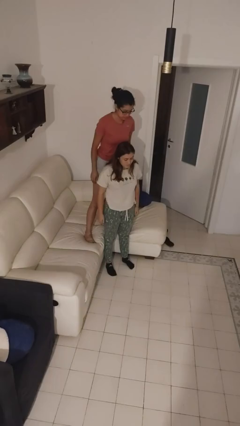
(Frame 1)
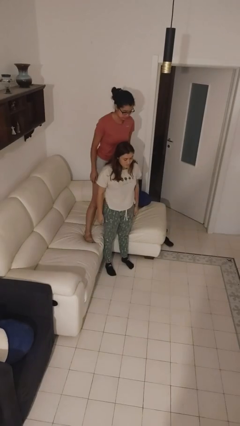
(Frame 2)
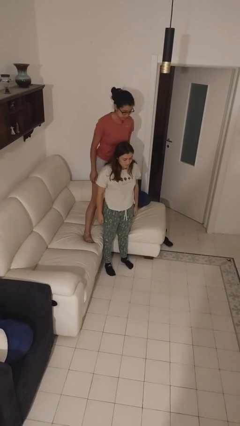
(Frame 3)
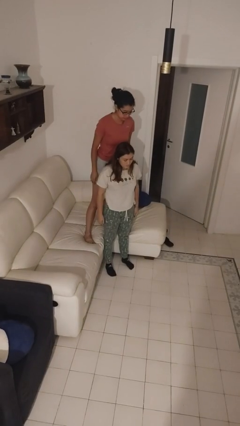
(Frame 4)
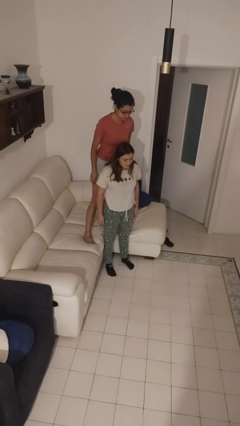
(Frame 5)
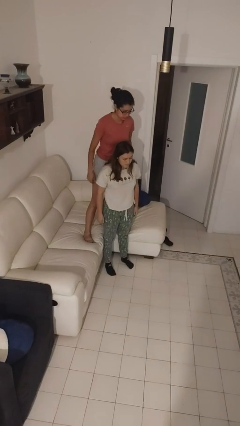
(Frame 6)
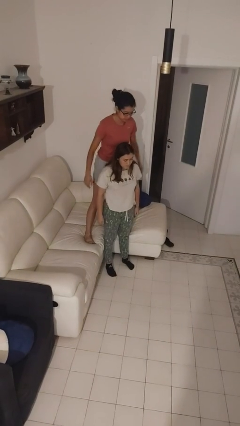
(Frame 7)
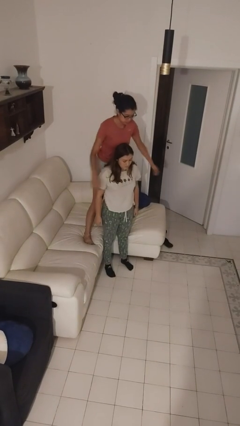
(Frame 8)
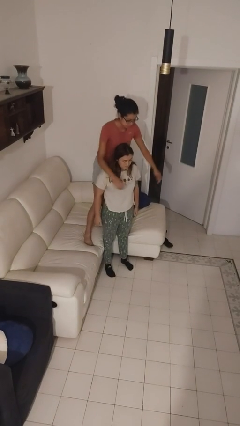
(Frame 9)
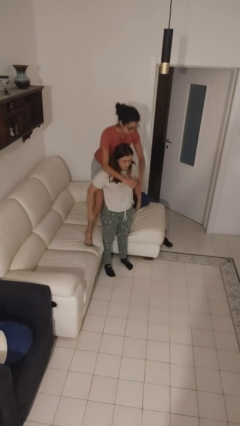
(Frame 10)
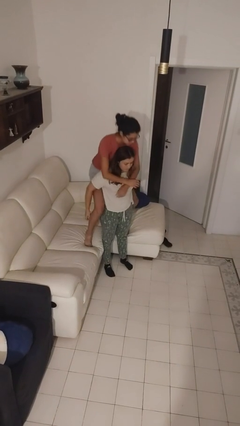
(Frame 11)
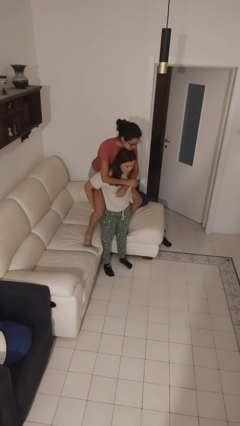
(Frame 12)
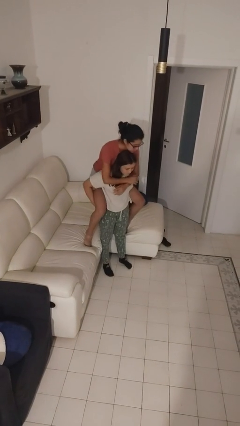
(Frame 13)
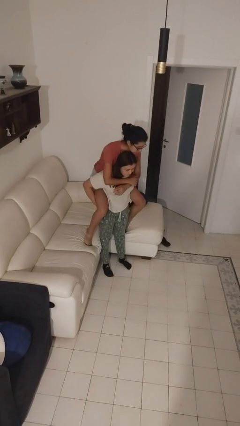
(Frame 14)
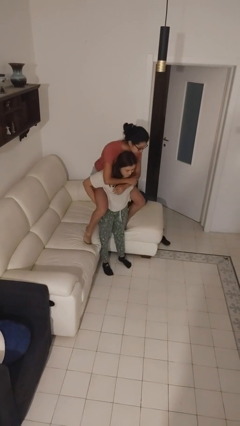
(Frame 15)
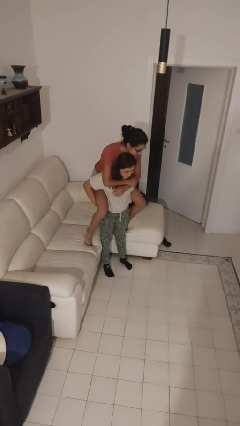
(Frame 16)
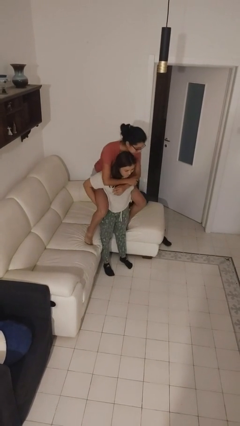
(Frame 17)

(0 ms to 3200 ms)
person carries person over shoulder

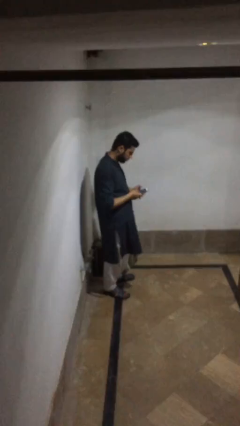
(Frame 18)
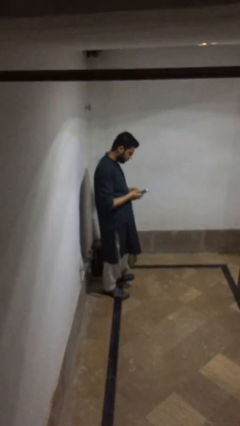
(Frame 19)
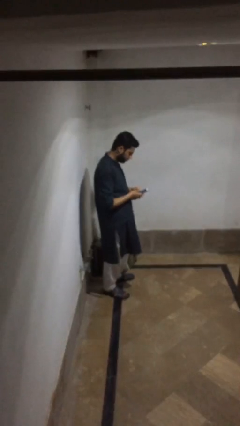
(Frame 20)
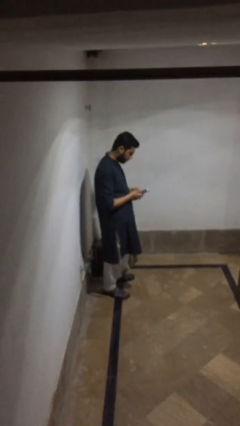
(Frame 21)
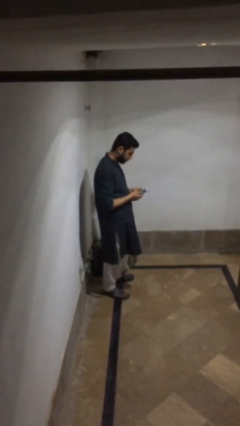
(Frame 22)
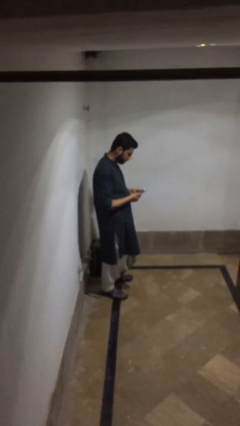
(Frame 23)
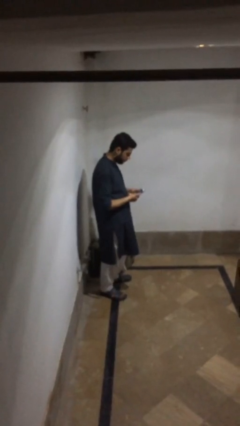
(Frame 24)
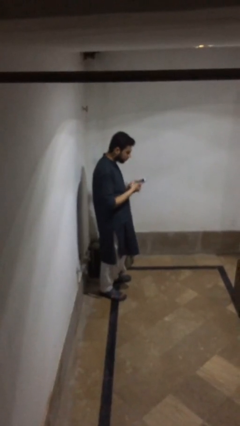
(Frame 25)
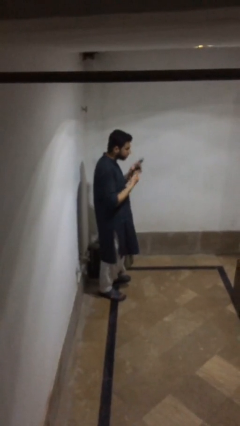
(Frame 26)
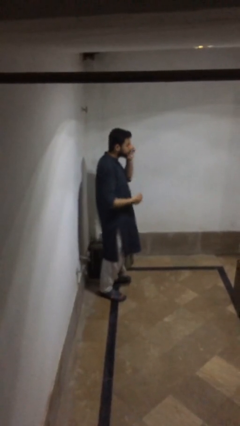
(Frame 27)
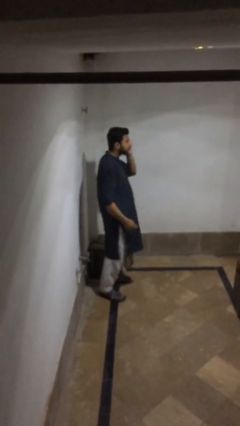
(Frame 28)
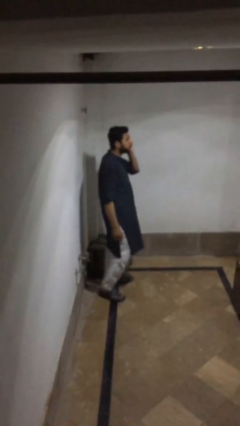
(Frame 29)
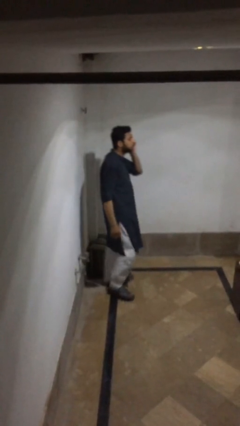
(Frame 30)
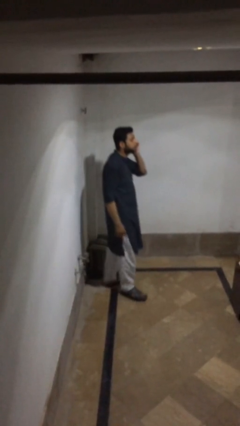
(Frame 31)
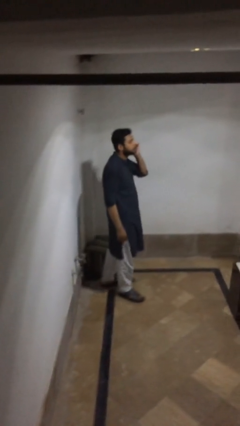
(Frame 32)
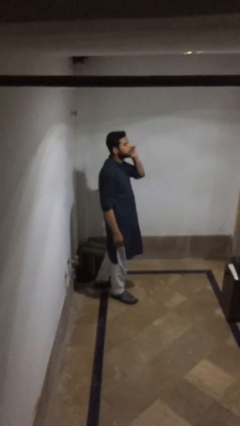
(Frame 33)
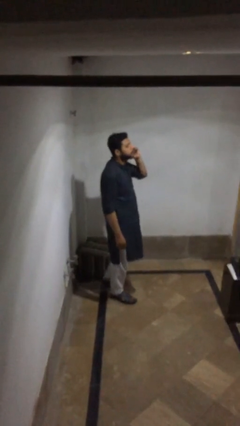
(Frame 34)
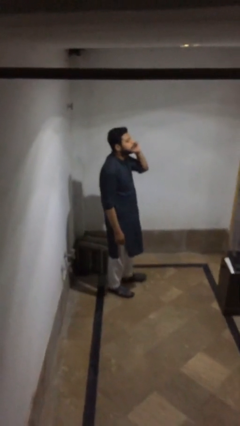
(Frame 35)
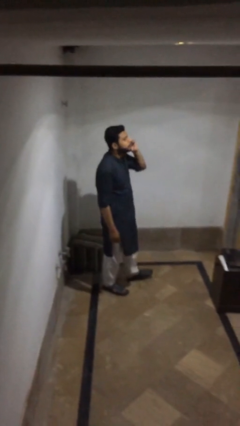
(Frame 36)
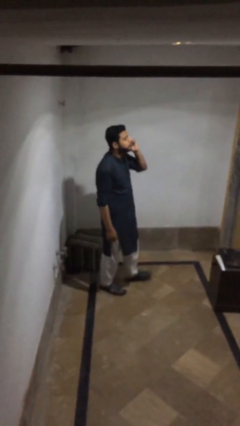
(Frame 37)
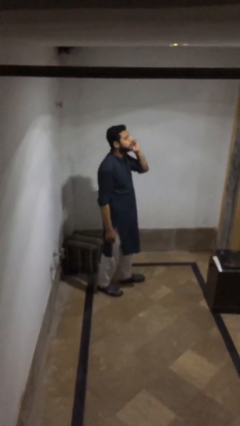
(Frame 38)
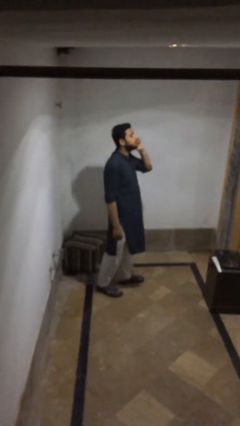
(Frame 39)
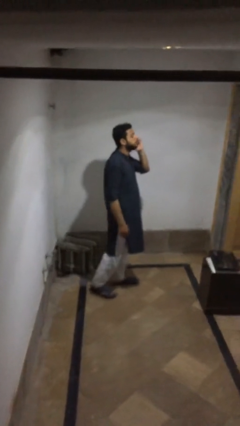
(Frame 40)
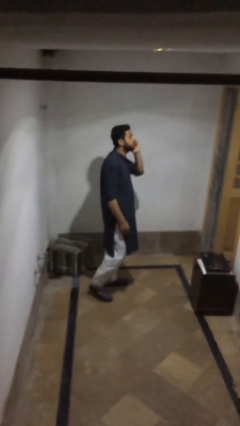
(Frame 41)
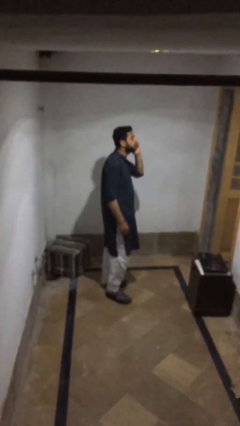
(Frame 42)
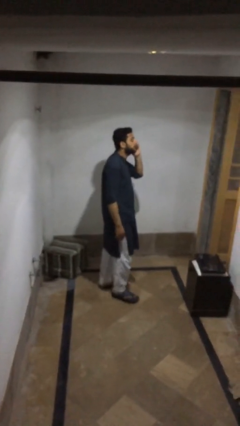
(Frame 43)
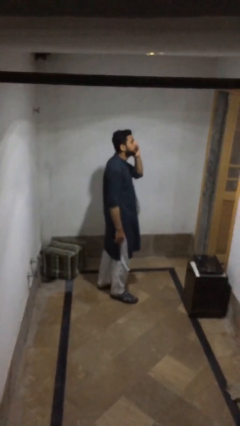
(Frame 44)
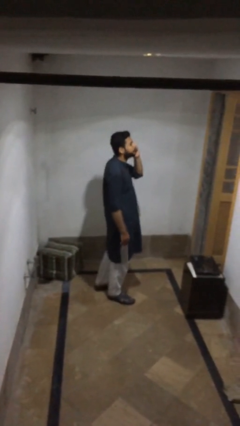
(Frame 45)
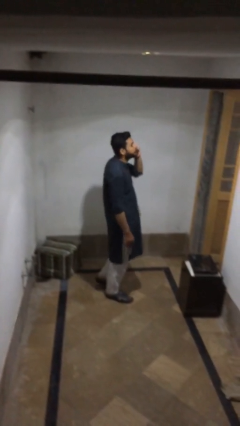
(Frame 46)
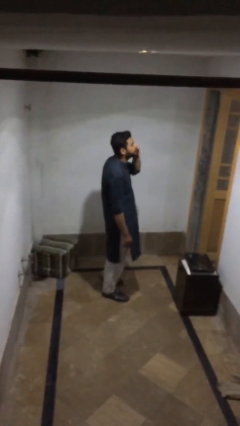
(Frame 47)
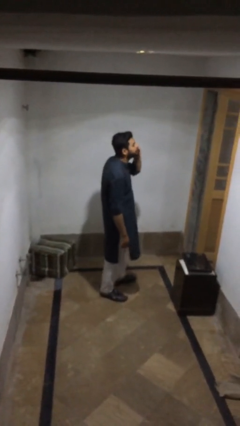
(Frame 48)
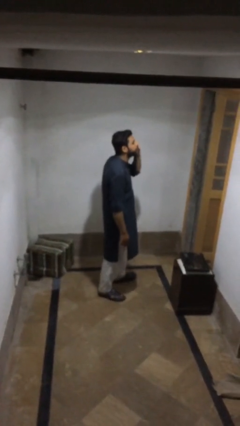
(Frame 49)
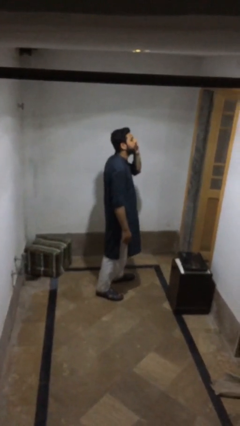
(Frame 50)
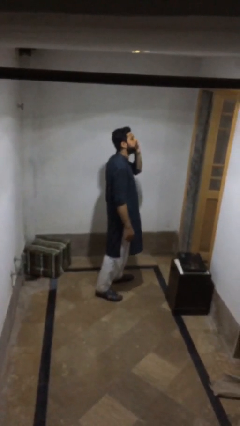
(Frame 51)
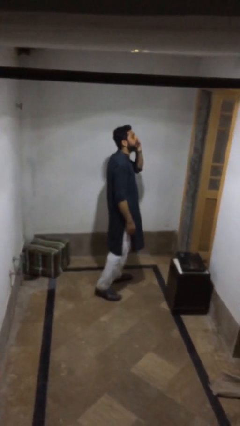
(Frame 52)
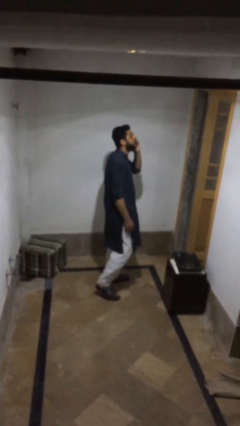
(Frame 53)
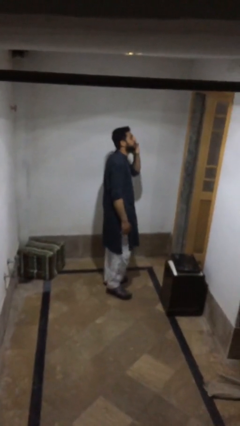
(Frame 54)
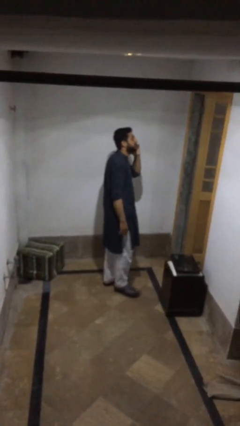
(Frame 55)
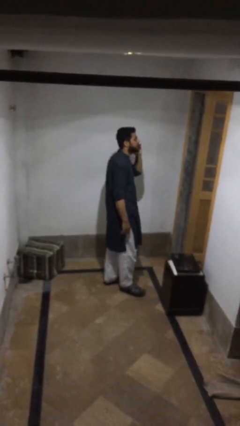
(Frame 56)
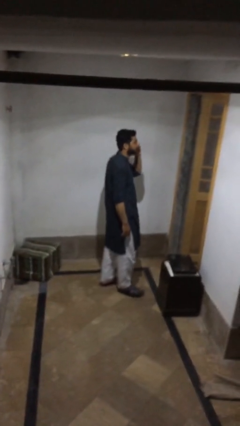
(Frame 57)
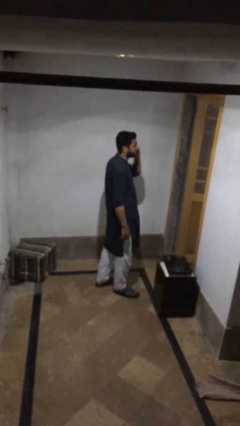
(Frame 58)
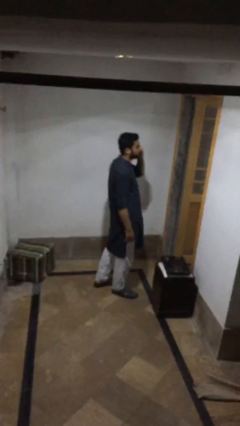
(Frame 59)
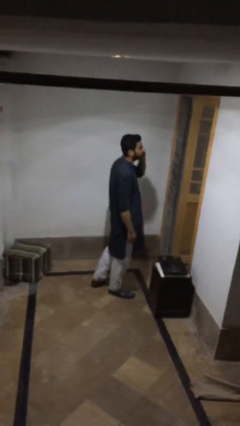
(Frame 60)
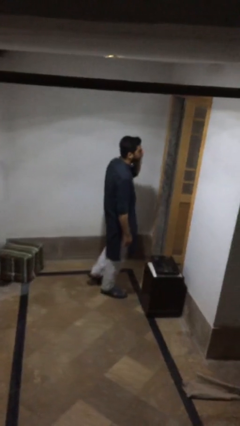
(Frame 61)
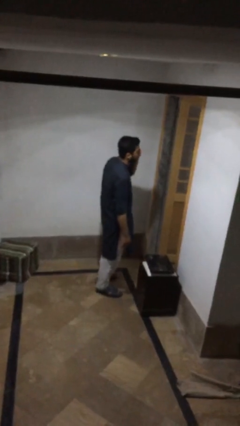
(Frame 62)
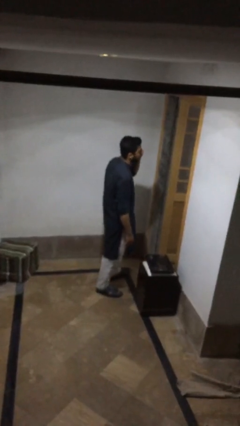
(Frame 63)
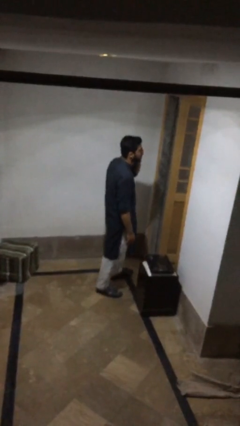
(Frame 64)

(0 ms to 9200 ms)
person talks on phone

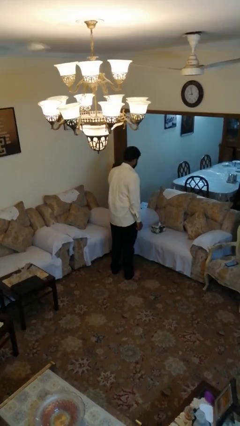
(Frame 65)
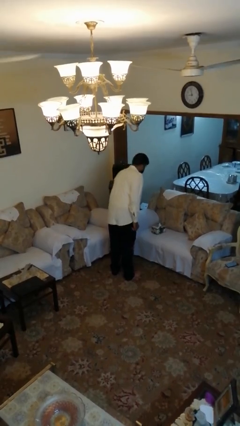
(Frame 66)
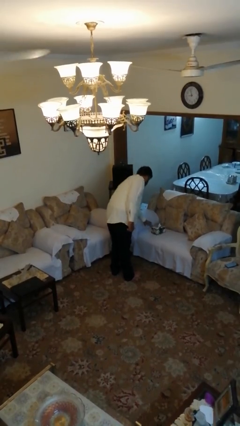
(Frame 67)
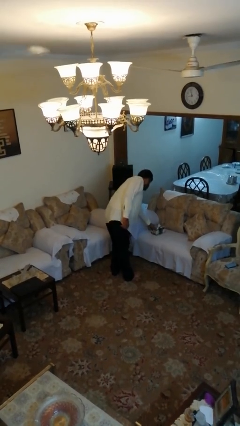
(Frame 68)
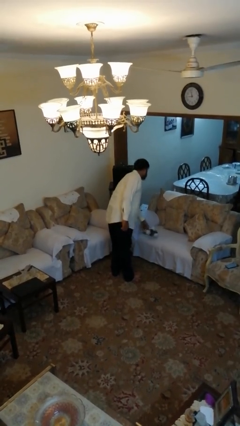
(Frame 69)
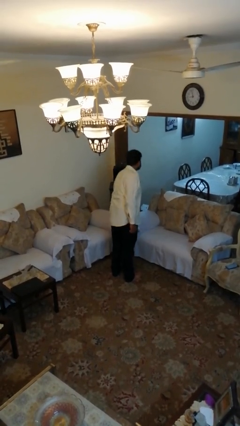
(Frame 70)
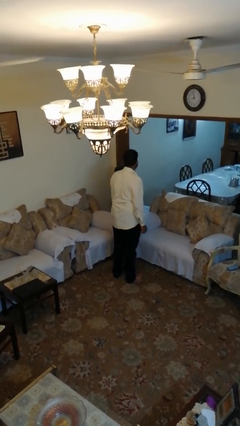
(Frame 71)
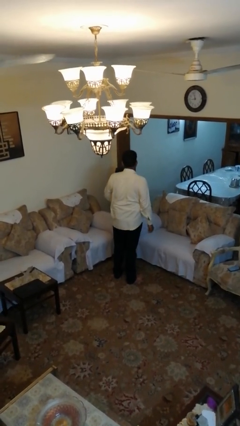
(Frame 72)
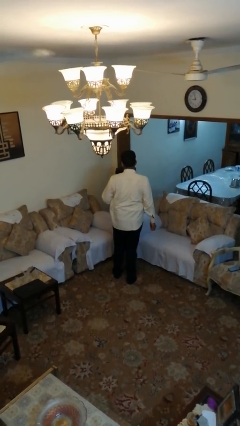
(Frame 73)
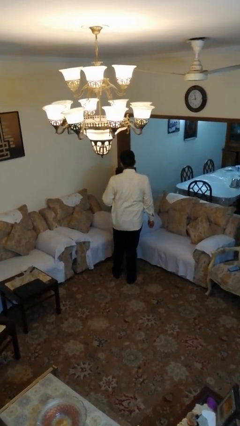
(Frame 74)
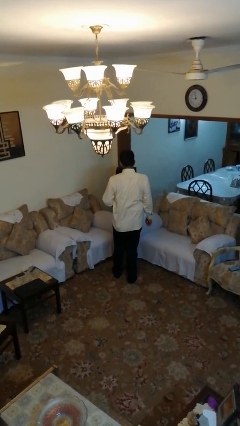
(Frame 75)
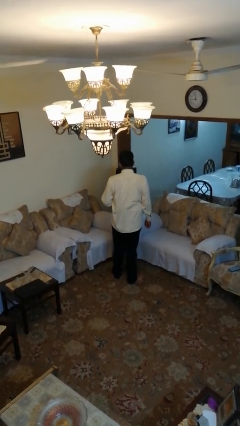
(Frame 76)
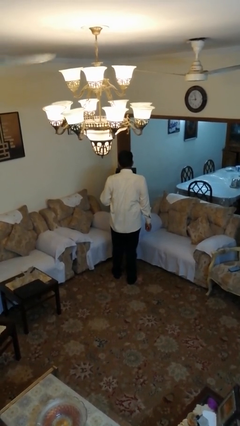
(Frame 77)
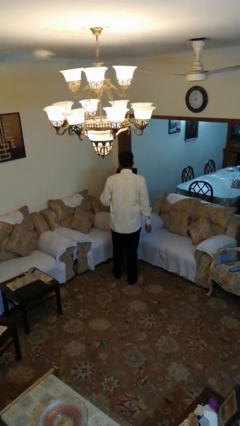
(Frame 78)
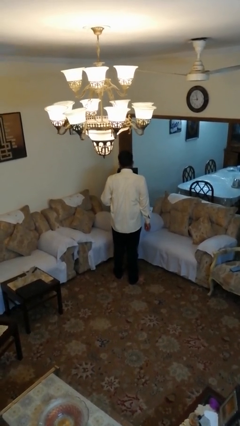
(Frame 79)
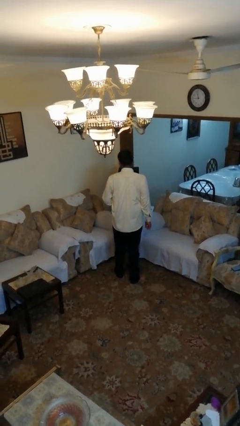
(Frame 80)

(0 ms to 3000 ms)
person picks up object from couch

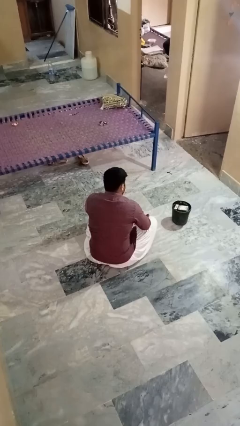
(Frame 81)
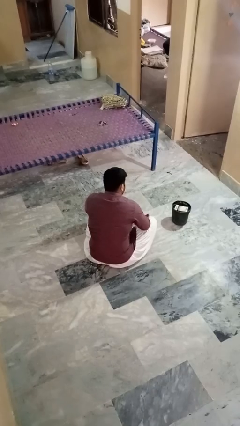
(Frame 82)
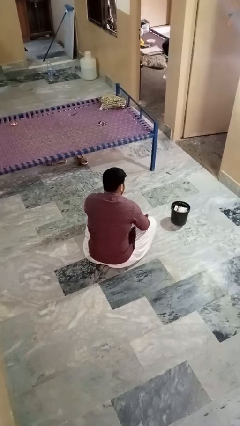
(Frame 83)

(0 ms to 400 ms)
person takes object from basket

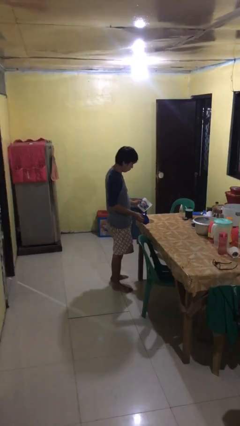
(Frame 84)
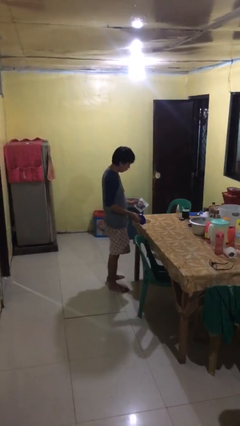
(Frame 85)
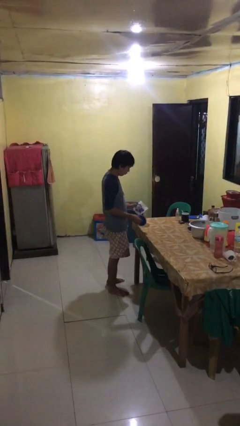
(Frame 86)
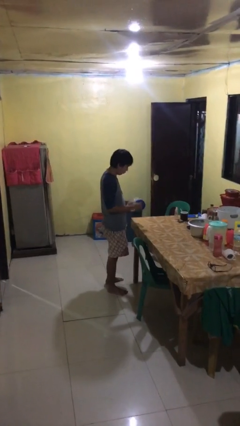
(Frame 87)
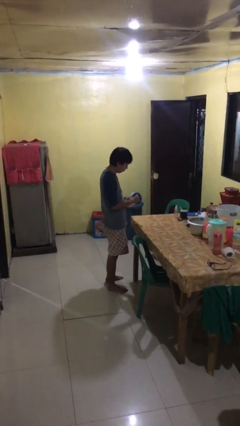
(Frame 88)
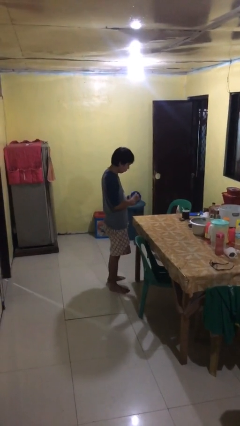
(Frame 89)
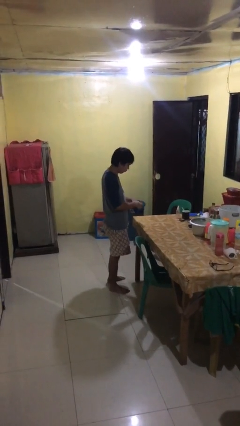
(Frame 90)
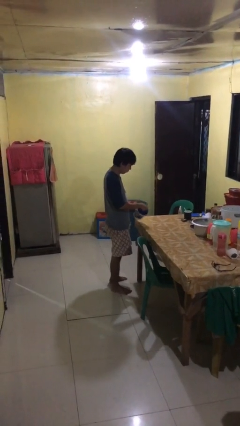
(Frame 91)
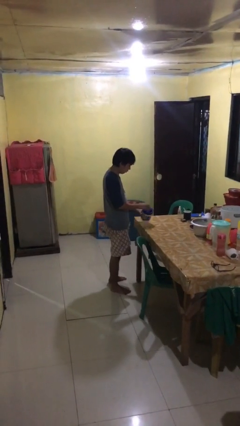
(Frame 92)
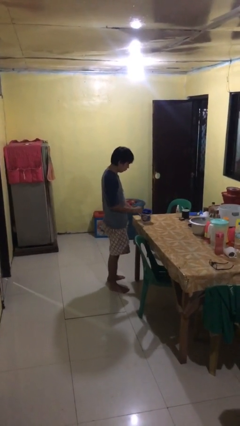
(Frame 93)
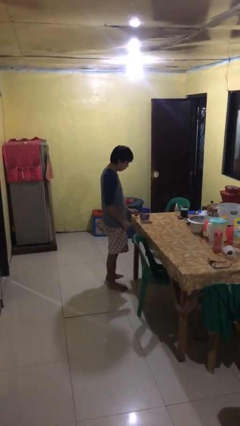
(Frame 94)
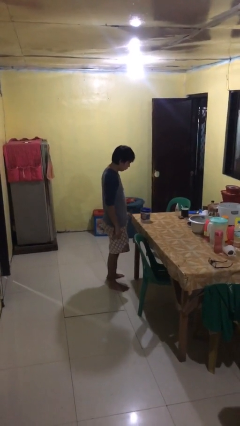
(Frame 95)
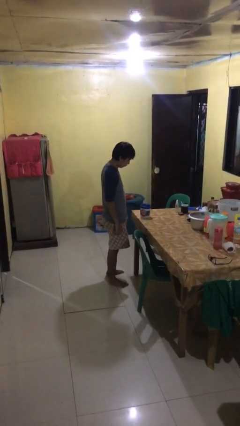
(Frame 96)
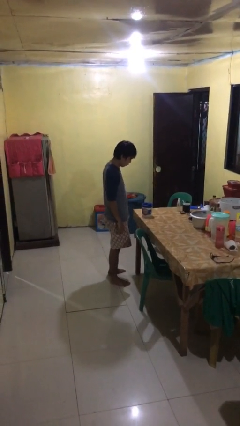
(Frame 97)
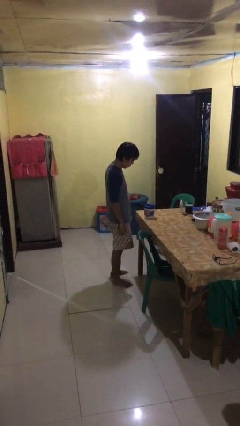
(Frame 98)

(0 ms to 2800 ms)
person closes jar
